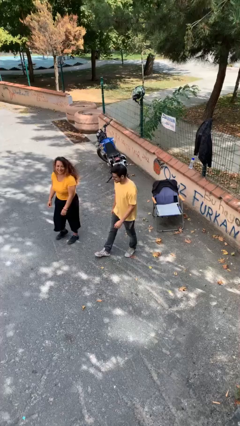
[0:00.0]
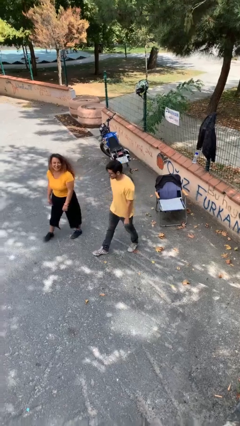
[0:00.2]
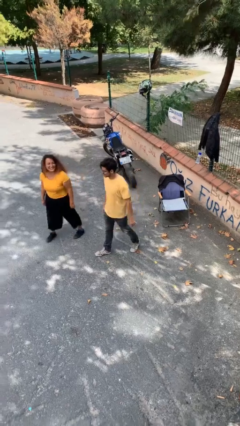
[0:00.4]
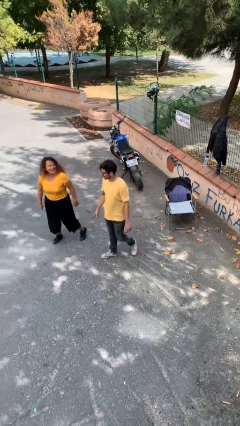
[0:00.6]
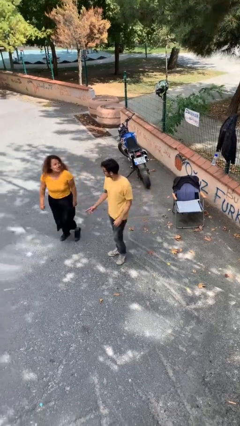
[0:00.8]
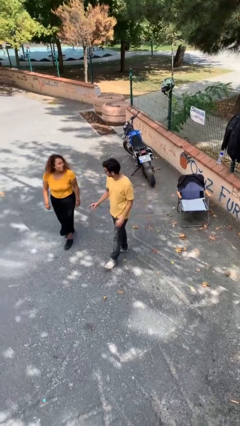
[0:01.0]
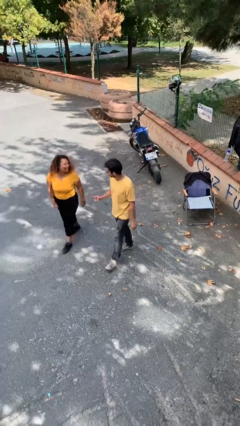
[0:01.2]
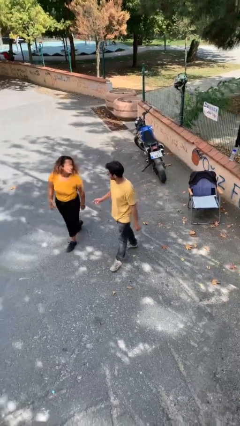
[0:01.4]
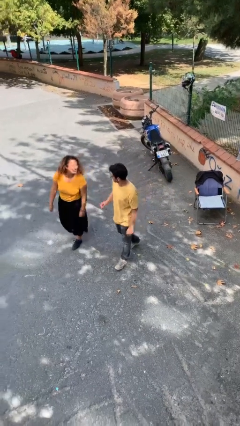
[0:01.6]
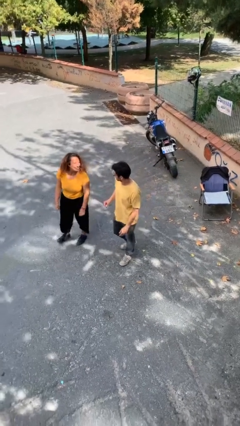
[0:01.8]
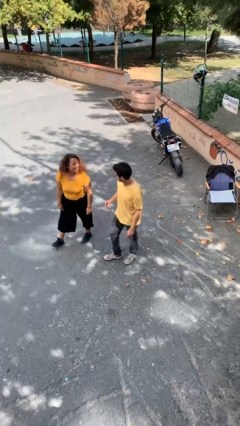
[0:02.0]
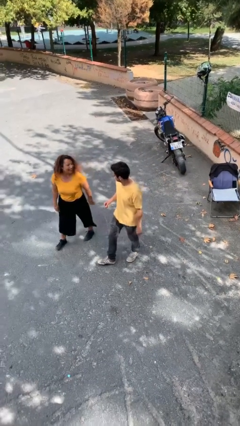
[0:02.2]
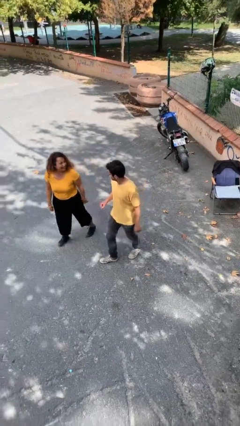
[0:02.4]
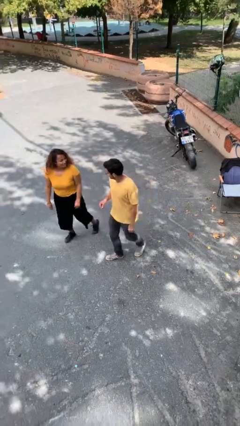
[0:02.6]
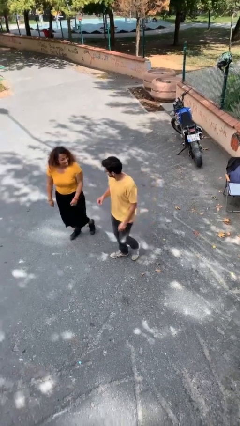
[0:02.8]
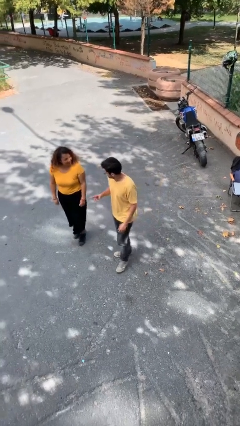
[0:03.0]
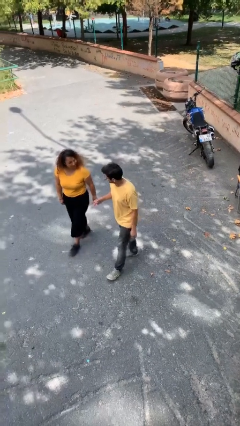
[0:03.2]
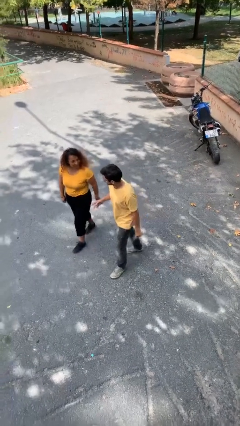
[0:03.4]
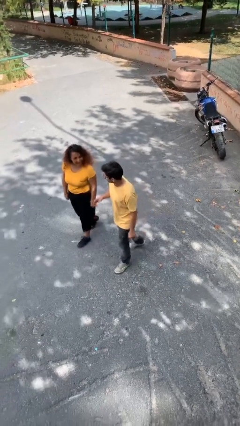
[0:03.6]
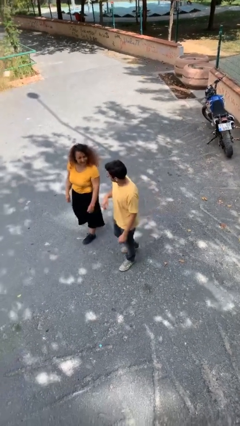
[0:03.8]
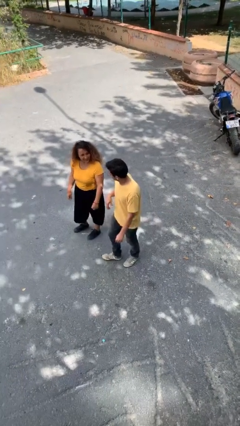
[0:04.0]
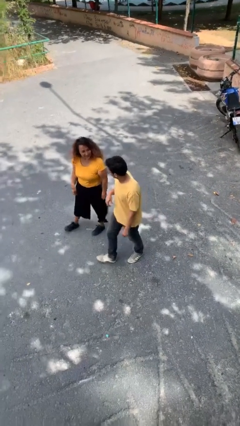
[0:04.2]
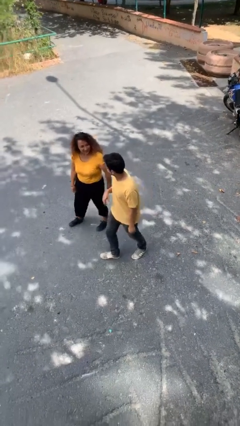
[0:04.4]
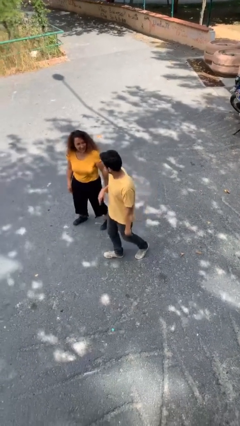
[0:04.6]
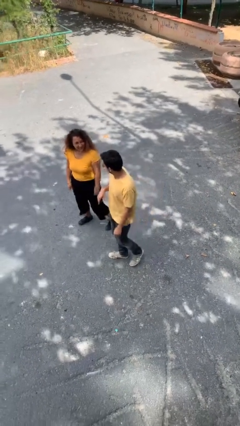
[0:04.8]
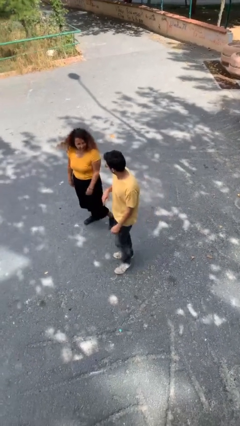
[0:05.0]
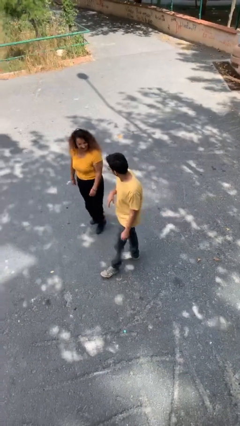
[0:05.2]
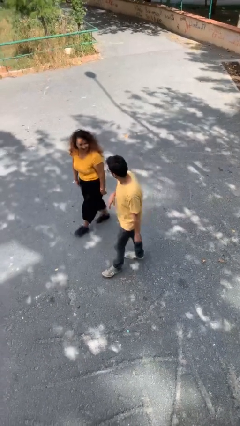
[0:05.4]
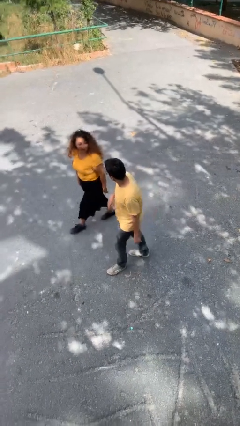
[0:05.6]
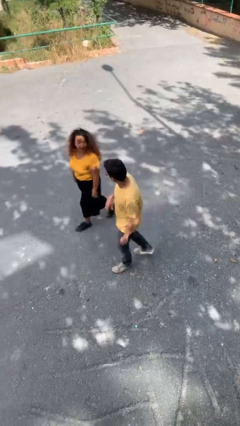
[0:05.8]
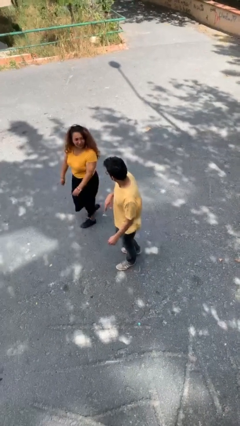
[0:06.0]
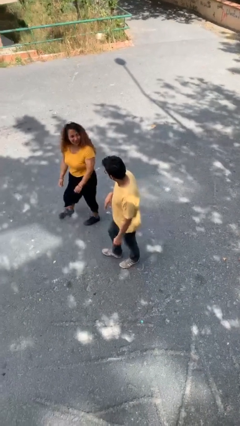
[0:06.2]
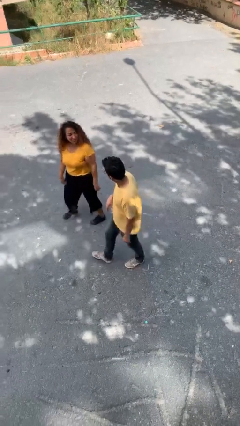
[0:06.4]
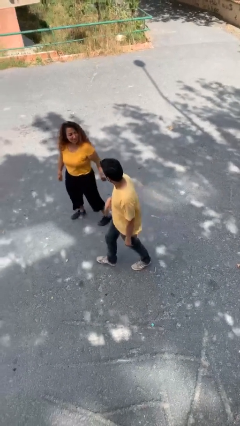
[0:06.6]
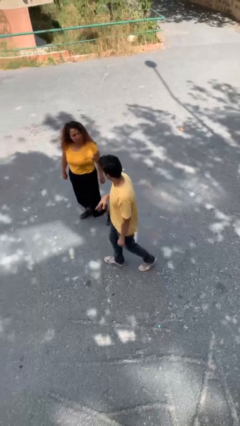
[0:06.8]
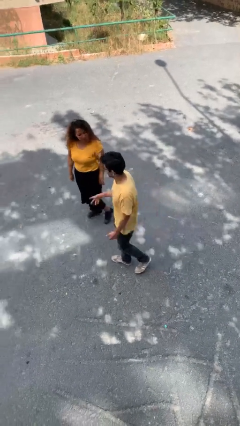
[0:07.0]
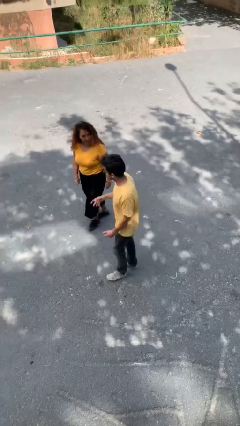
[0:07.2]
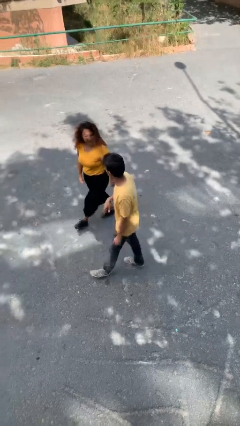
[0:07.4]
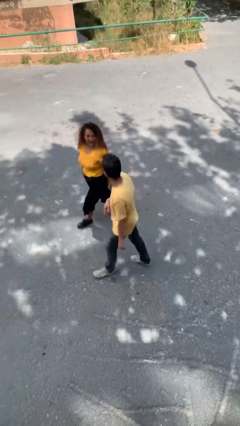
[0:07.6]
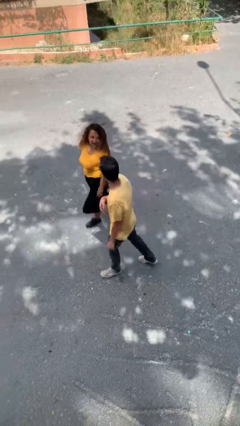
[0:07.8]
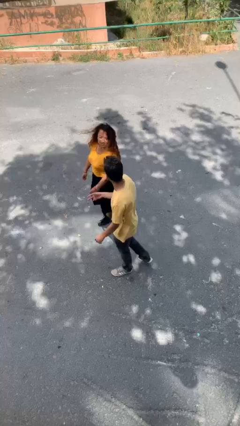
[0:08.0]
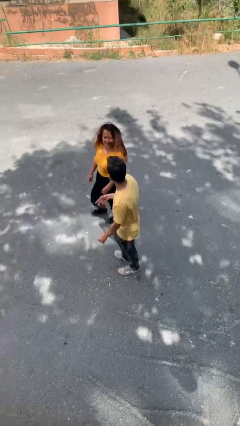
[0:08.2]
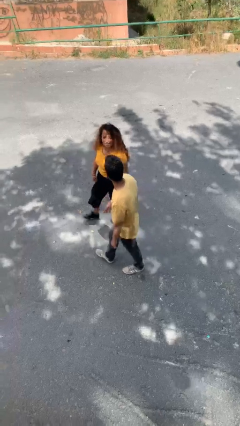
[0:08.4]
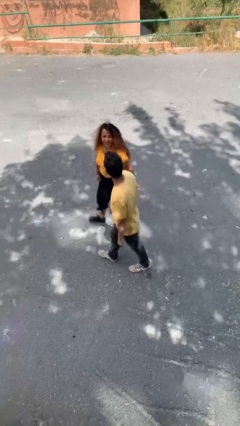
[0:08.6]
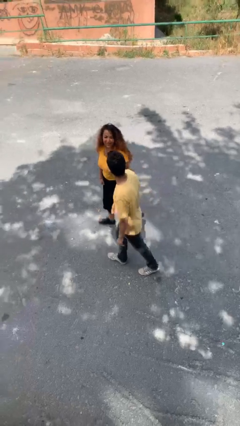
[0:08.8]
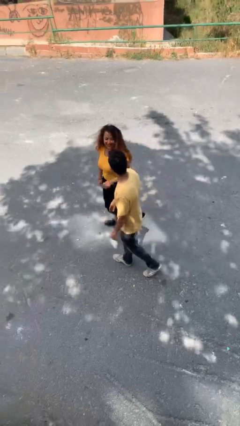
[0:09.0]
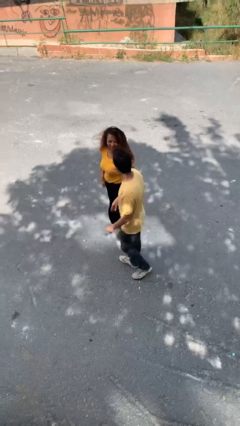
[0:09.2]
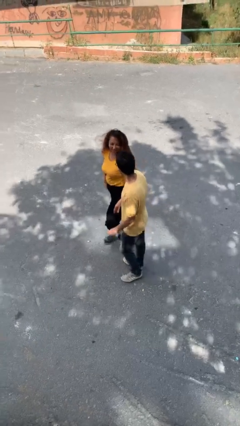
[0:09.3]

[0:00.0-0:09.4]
person talks to person

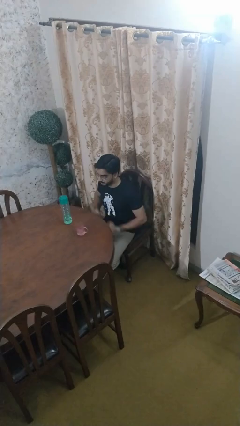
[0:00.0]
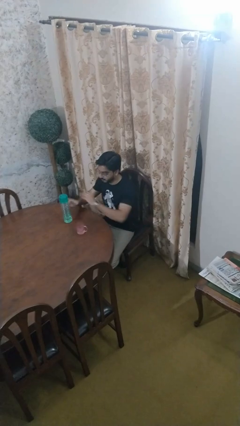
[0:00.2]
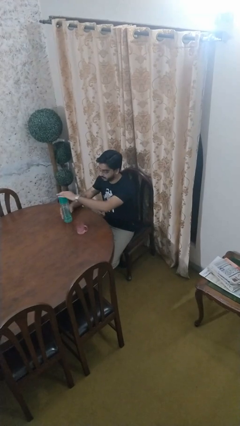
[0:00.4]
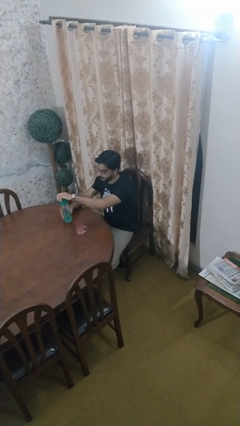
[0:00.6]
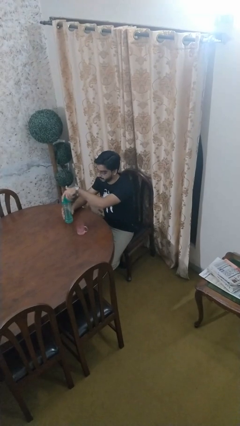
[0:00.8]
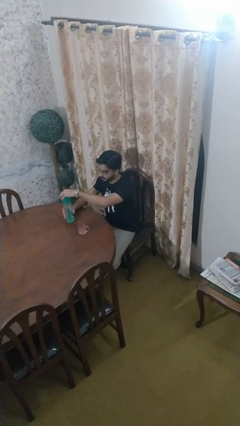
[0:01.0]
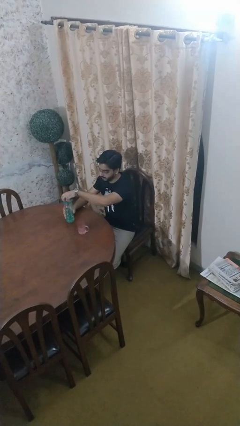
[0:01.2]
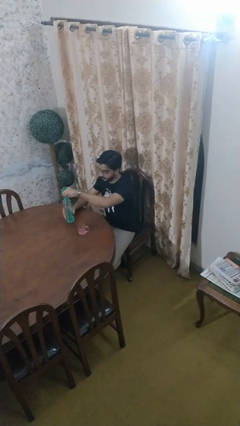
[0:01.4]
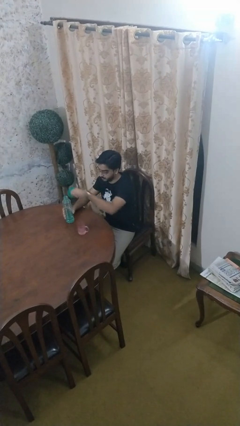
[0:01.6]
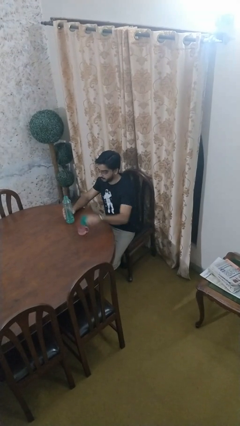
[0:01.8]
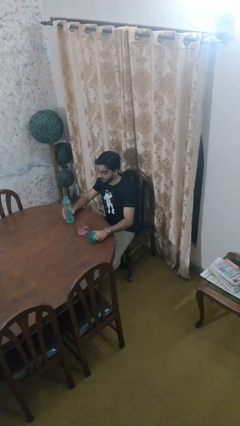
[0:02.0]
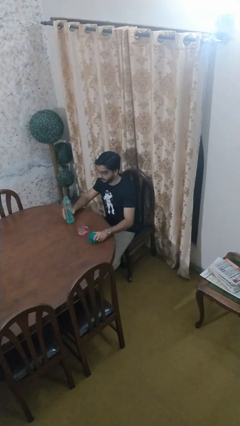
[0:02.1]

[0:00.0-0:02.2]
person unscrews lid from bottle

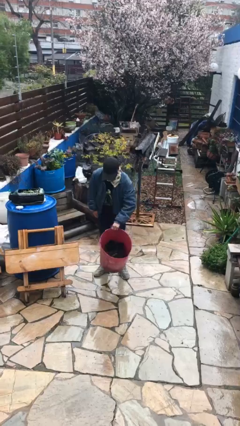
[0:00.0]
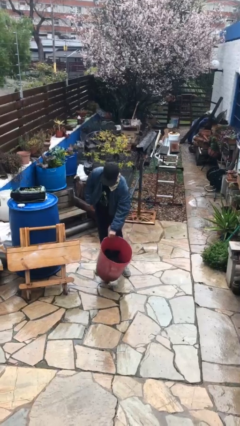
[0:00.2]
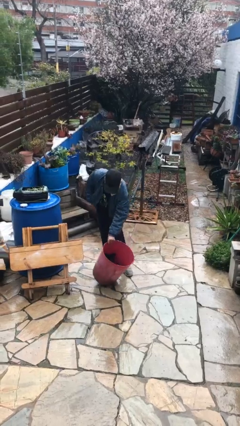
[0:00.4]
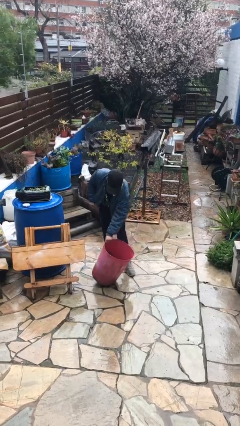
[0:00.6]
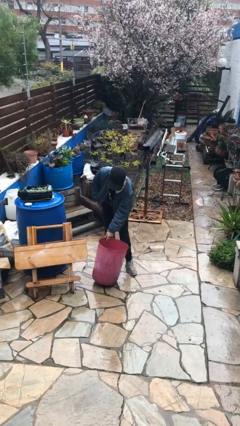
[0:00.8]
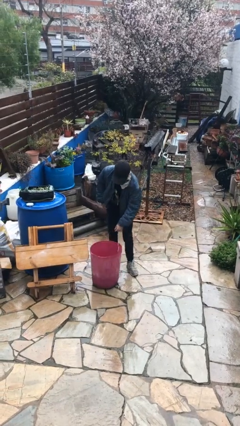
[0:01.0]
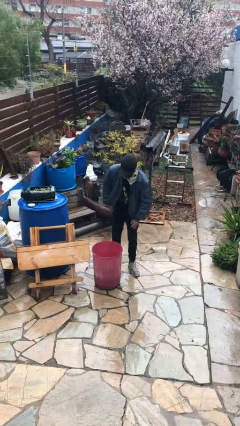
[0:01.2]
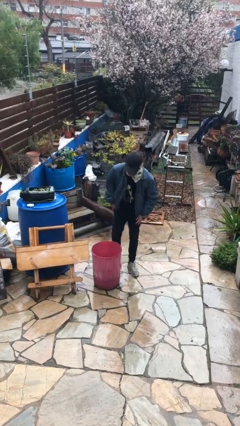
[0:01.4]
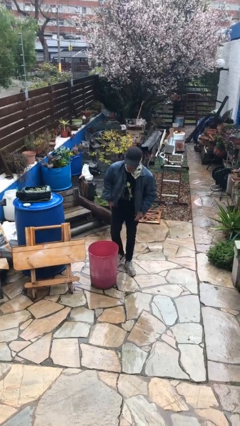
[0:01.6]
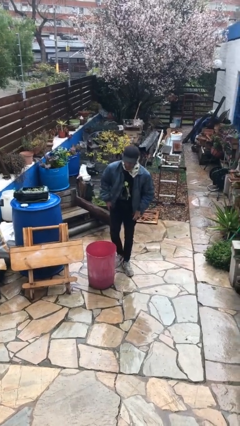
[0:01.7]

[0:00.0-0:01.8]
person puts down object on floor

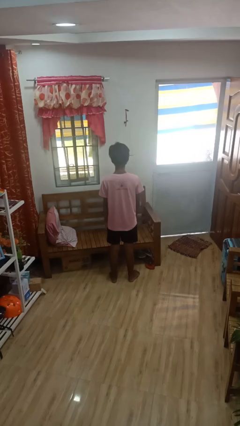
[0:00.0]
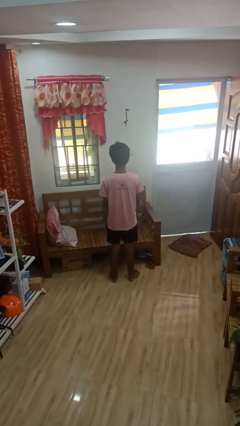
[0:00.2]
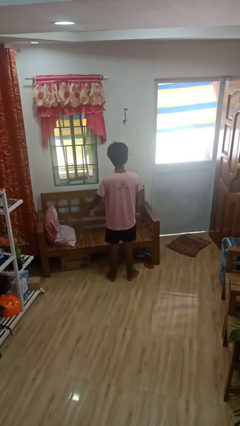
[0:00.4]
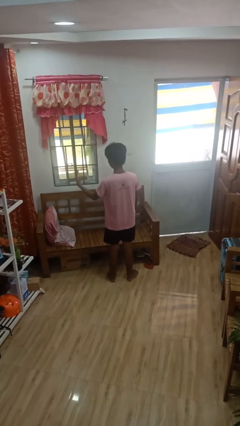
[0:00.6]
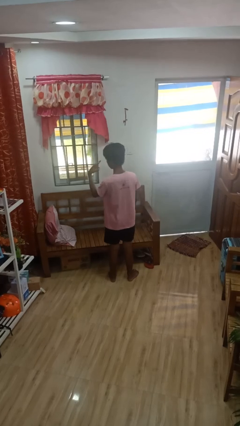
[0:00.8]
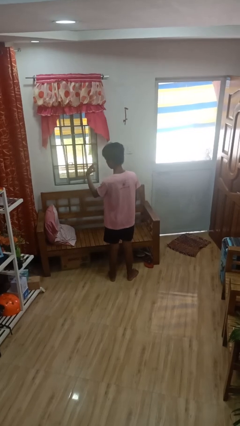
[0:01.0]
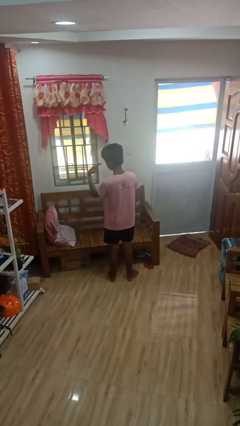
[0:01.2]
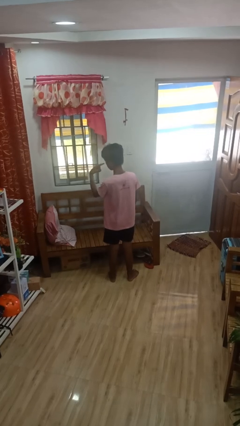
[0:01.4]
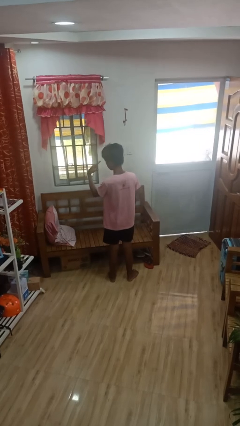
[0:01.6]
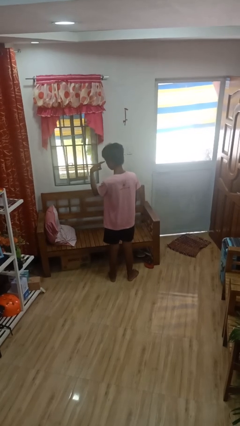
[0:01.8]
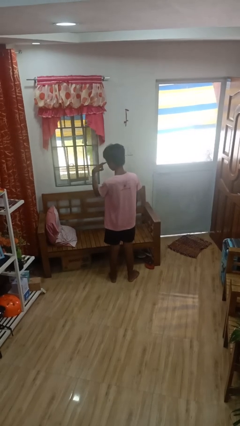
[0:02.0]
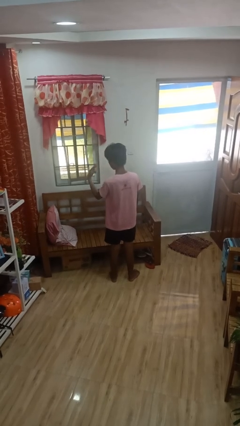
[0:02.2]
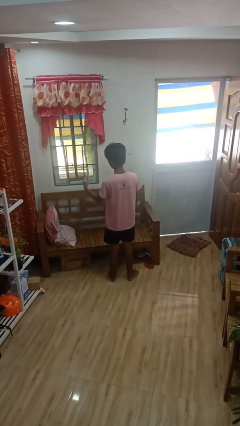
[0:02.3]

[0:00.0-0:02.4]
person gestures watch closely

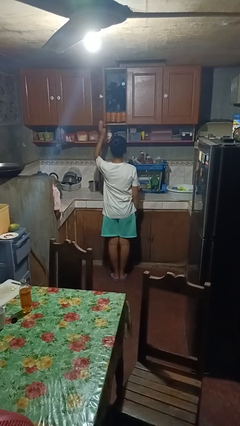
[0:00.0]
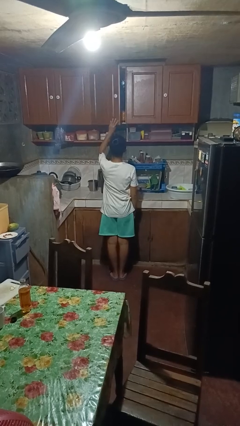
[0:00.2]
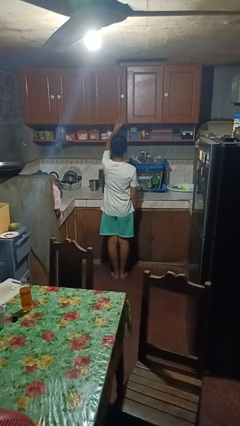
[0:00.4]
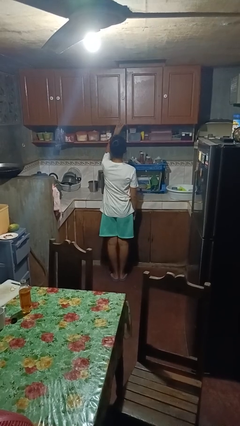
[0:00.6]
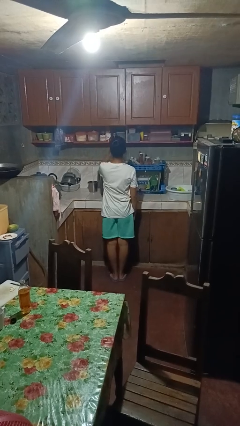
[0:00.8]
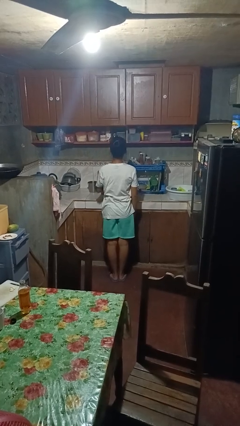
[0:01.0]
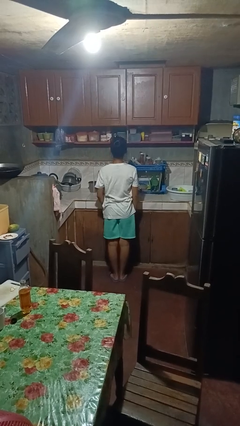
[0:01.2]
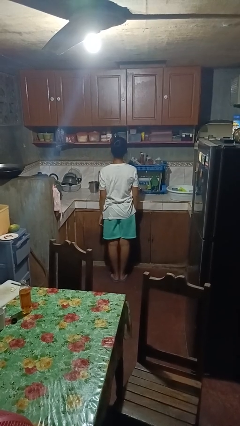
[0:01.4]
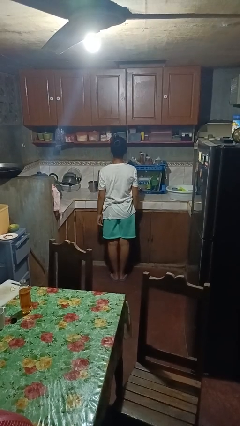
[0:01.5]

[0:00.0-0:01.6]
person closes cabinet
